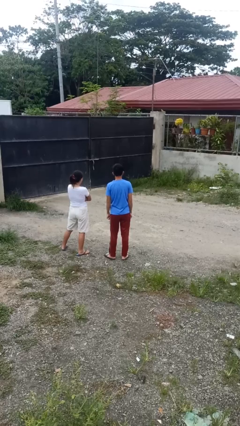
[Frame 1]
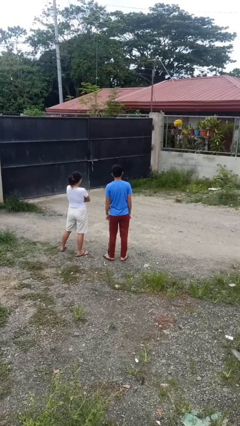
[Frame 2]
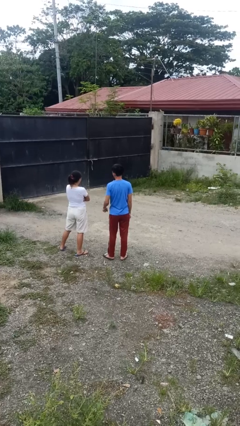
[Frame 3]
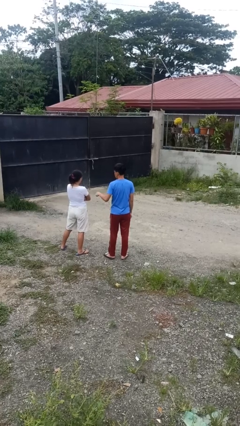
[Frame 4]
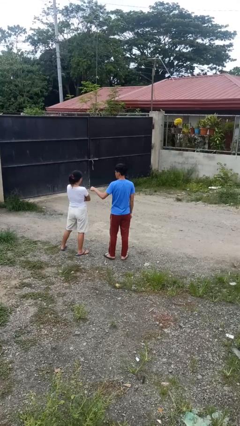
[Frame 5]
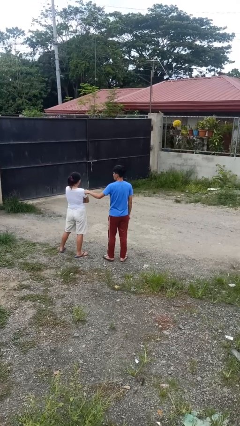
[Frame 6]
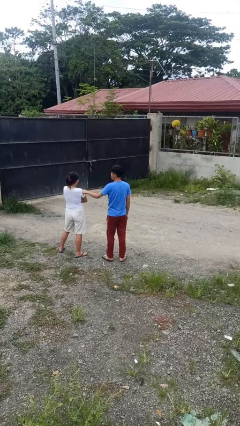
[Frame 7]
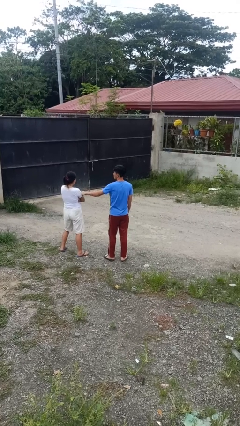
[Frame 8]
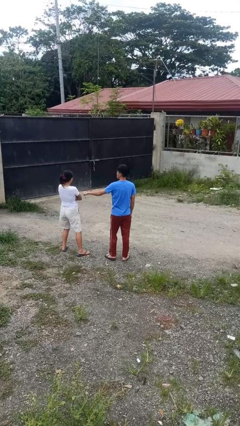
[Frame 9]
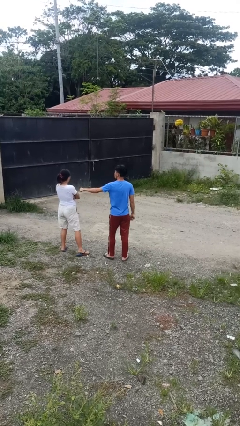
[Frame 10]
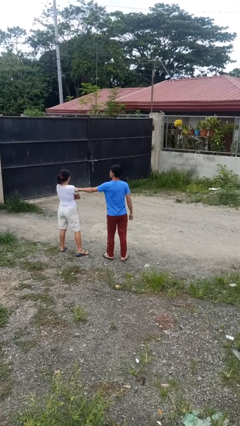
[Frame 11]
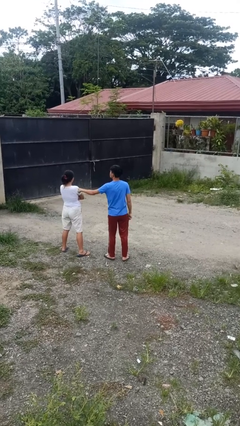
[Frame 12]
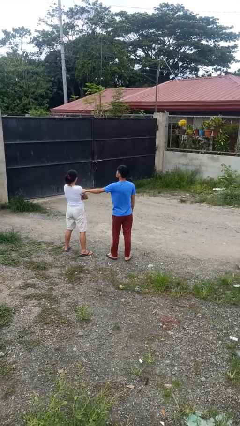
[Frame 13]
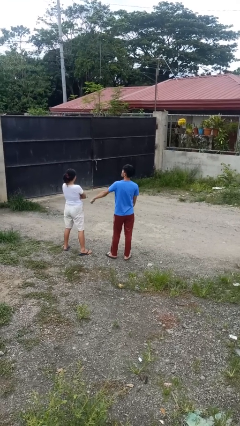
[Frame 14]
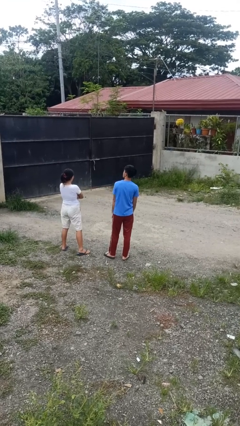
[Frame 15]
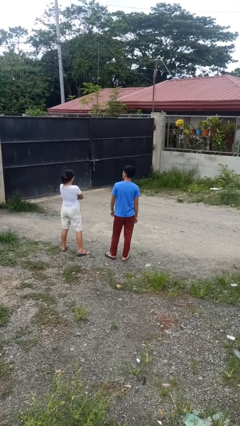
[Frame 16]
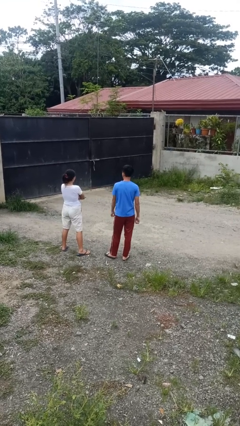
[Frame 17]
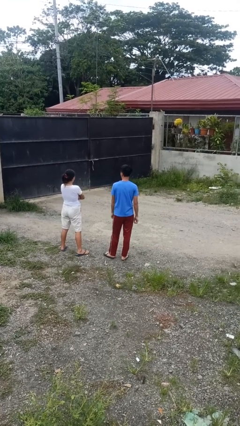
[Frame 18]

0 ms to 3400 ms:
person pounds shoulders of person

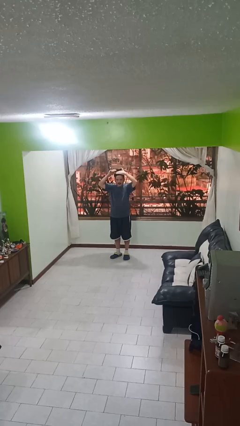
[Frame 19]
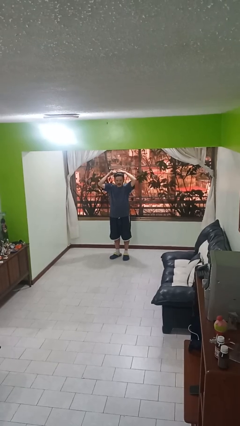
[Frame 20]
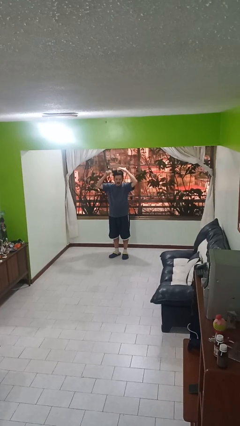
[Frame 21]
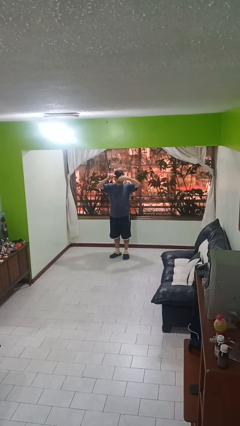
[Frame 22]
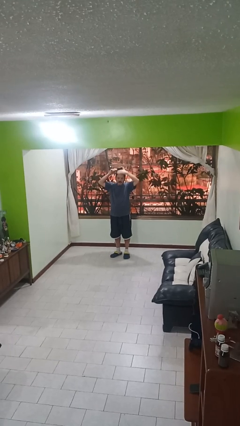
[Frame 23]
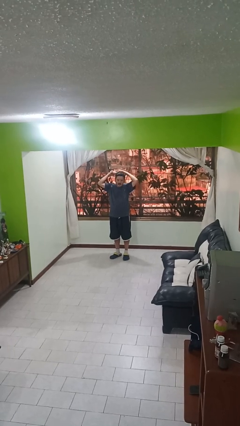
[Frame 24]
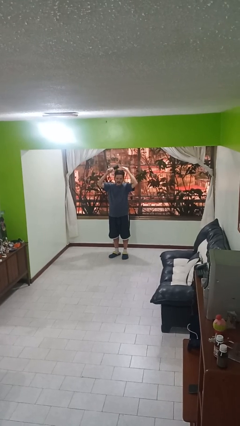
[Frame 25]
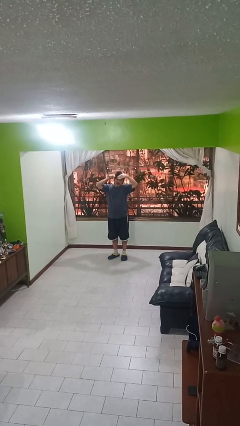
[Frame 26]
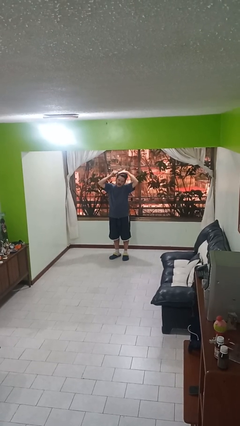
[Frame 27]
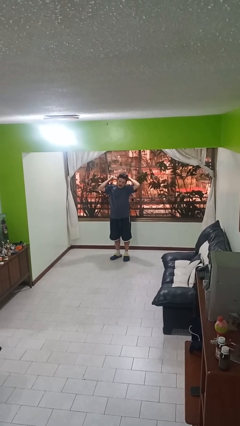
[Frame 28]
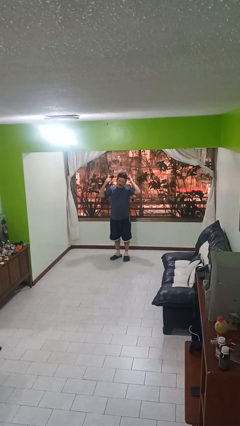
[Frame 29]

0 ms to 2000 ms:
person brushes hair

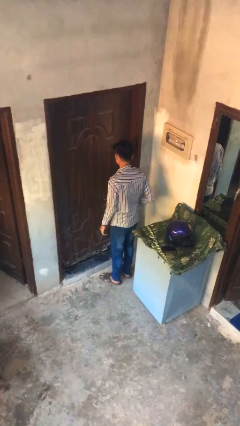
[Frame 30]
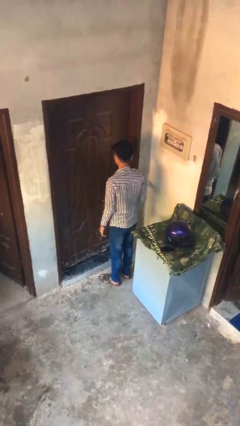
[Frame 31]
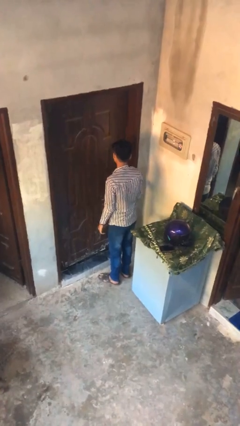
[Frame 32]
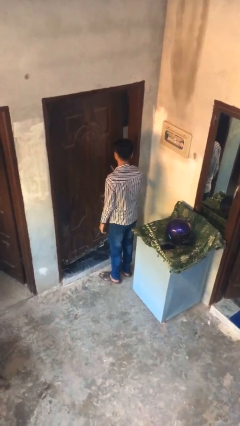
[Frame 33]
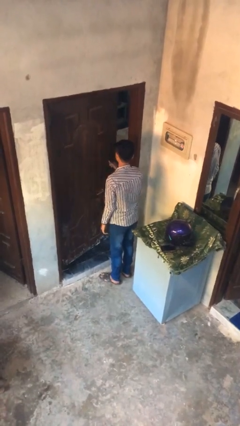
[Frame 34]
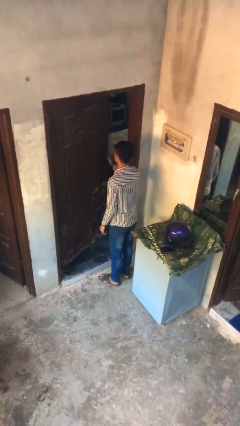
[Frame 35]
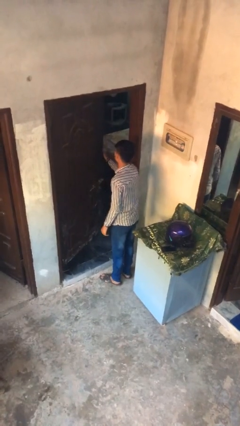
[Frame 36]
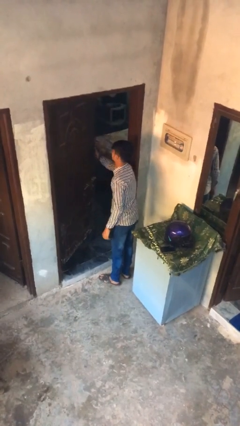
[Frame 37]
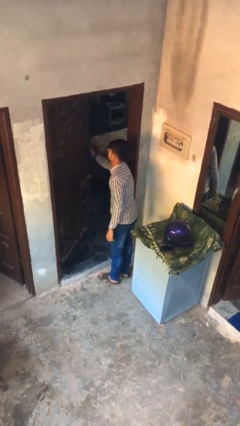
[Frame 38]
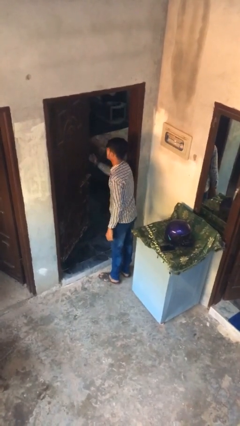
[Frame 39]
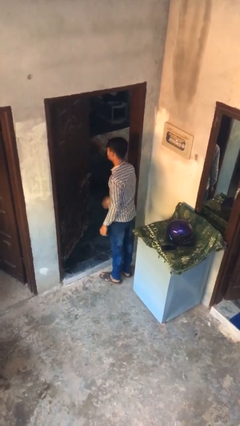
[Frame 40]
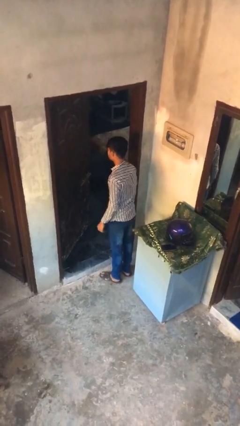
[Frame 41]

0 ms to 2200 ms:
person opens facility door

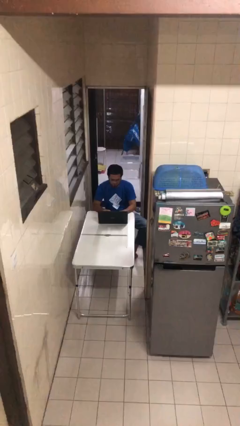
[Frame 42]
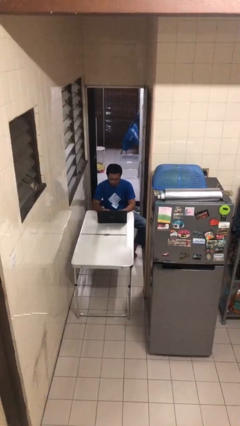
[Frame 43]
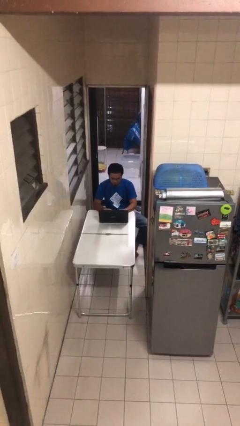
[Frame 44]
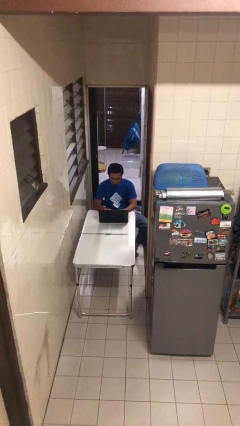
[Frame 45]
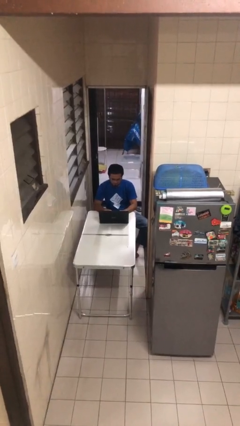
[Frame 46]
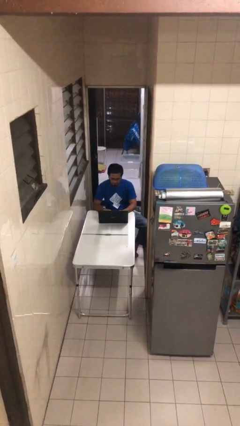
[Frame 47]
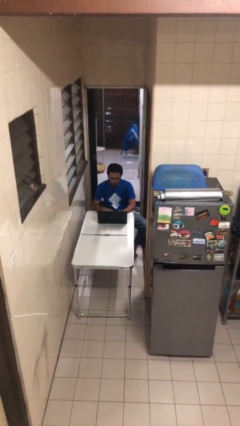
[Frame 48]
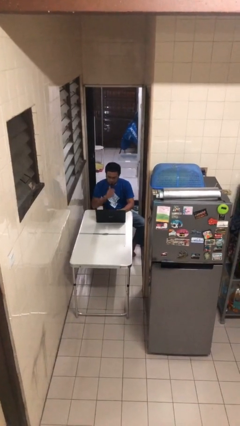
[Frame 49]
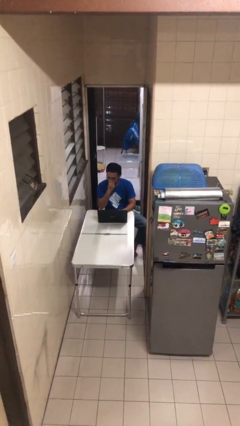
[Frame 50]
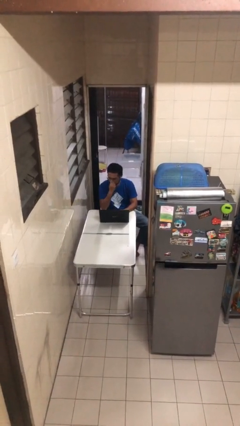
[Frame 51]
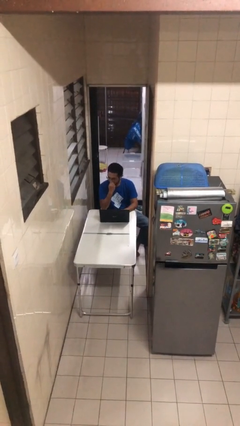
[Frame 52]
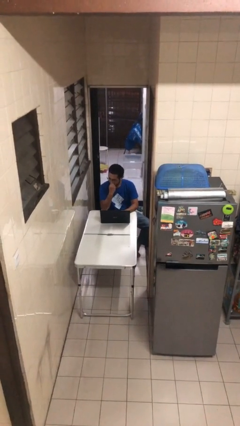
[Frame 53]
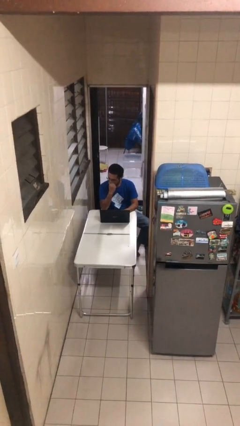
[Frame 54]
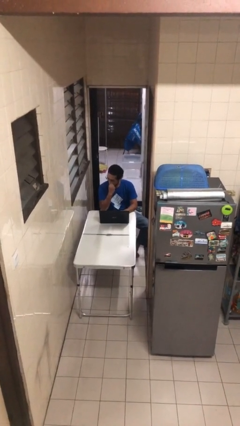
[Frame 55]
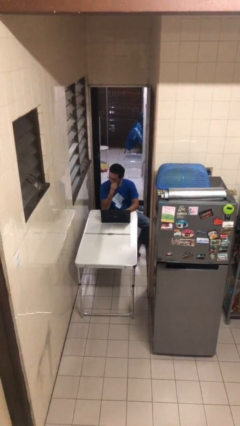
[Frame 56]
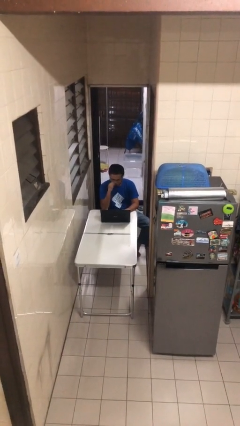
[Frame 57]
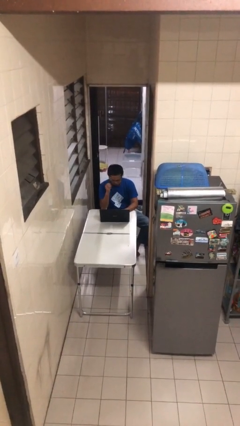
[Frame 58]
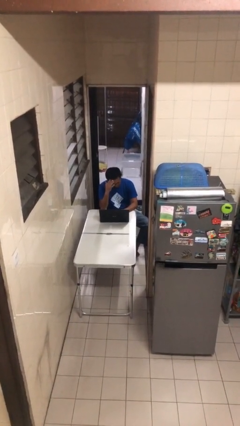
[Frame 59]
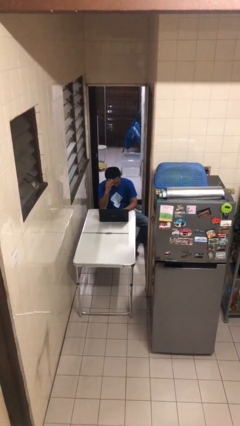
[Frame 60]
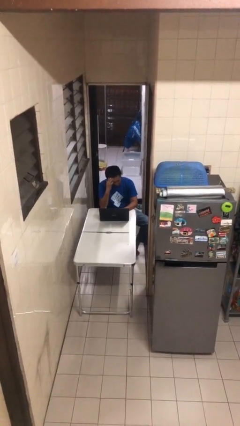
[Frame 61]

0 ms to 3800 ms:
person interacts with laptop

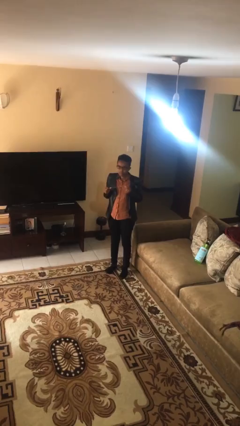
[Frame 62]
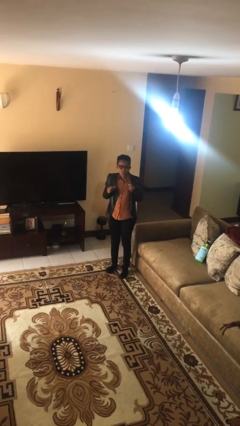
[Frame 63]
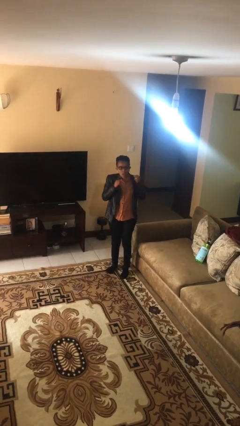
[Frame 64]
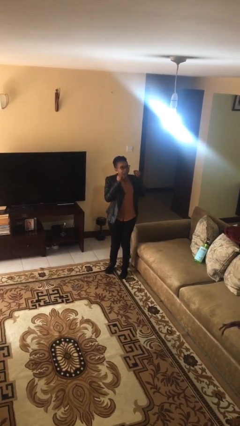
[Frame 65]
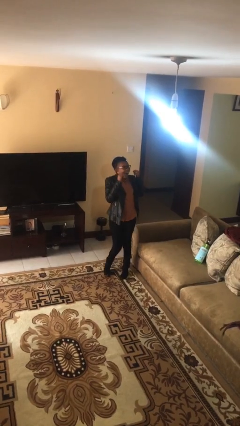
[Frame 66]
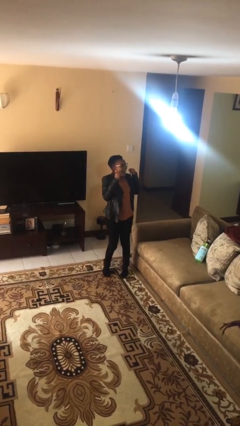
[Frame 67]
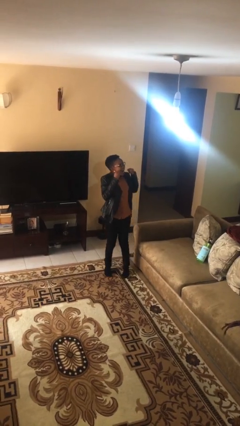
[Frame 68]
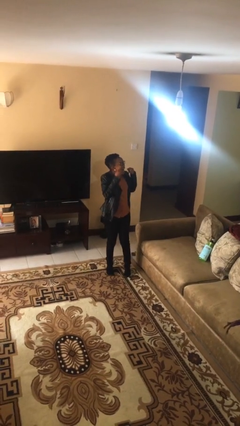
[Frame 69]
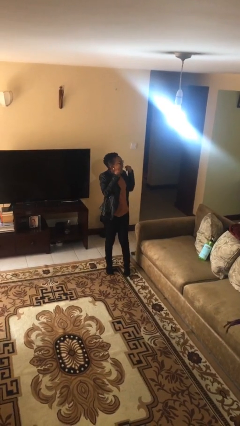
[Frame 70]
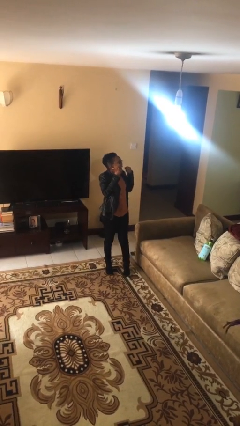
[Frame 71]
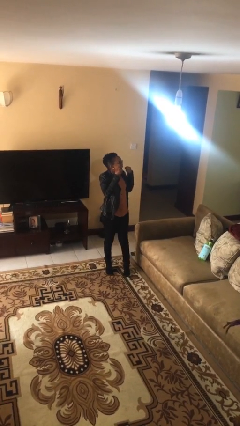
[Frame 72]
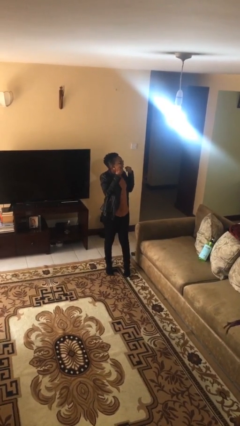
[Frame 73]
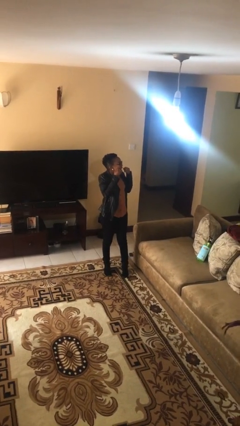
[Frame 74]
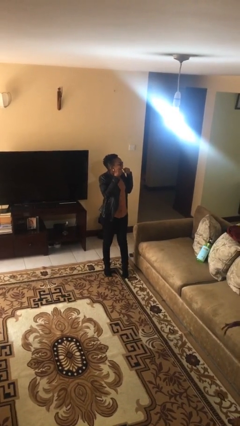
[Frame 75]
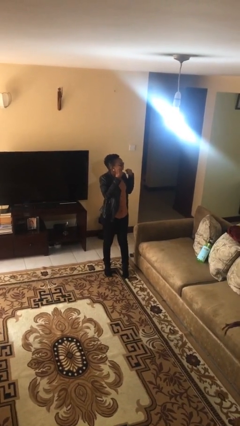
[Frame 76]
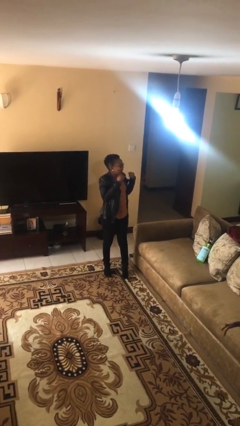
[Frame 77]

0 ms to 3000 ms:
person flosses

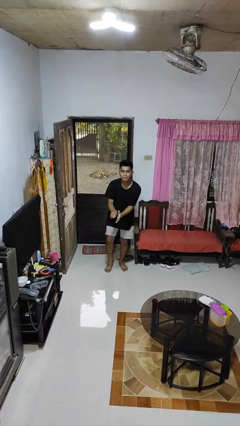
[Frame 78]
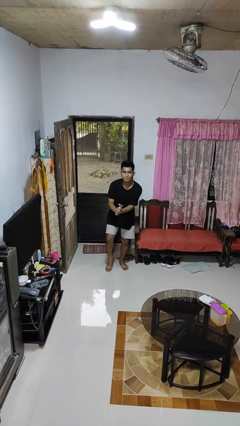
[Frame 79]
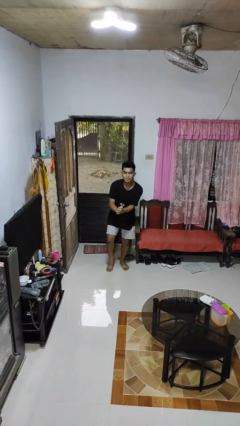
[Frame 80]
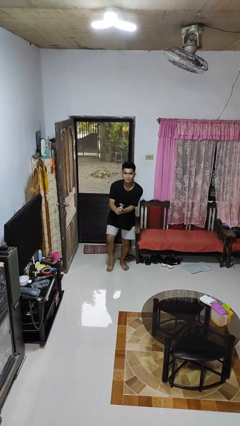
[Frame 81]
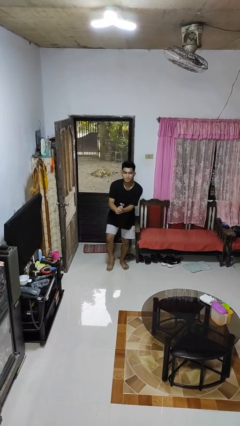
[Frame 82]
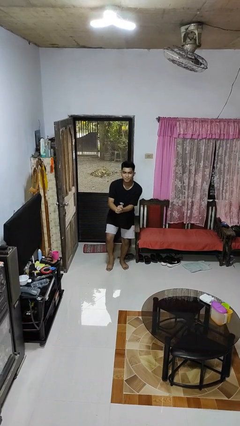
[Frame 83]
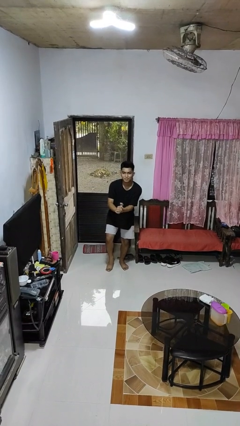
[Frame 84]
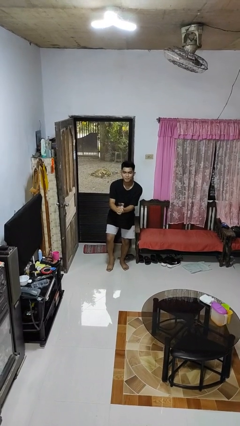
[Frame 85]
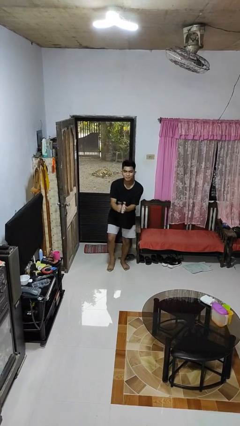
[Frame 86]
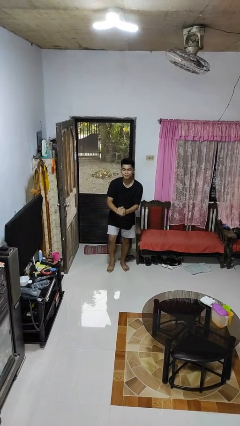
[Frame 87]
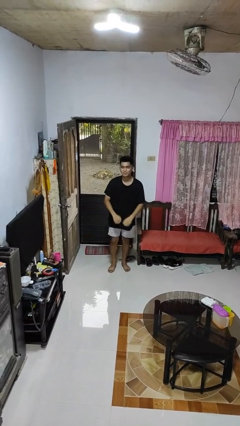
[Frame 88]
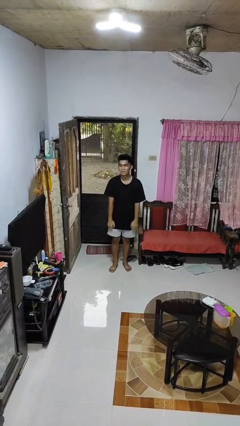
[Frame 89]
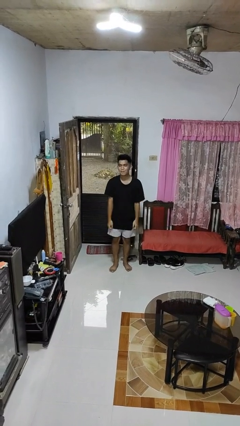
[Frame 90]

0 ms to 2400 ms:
person claps hands

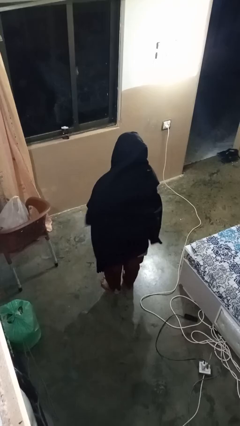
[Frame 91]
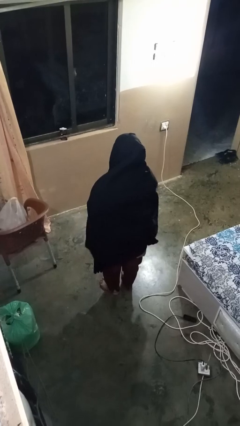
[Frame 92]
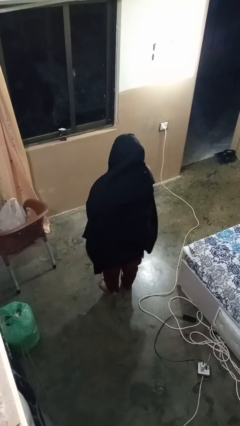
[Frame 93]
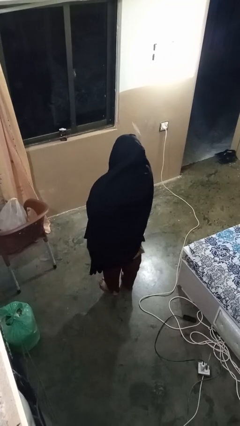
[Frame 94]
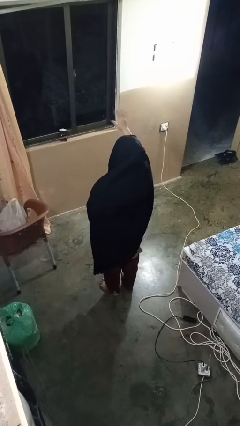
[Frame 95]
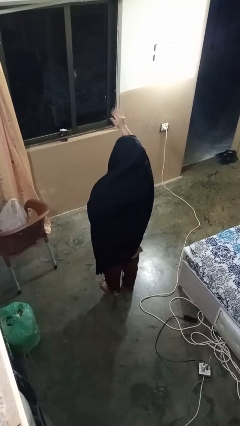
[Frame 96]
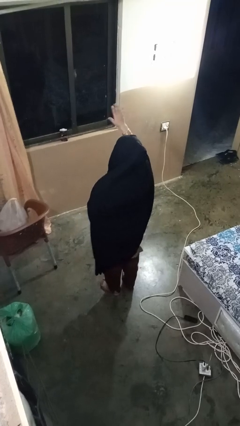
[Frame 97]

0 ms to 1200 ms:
person gestures come here
